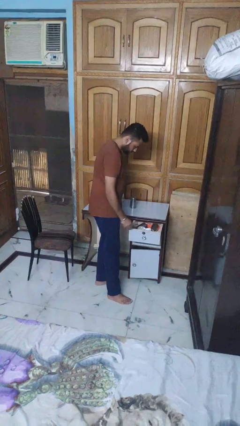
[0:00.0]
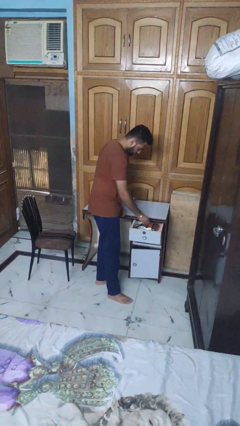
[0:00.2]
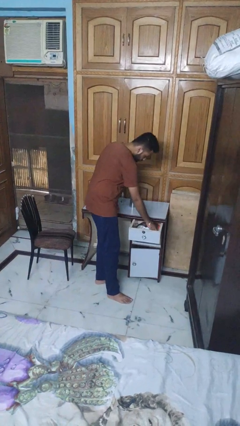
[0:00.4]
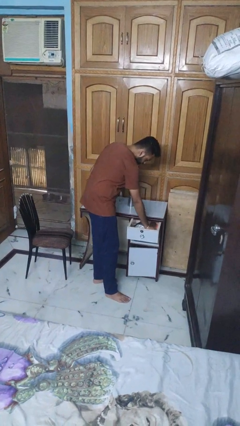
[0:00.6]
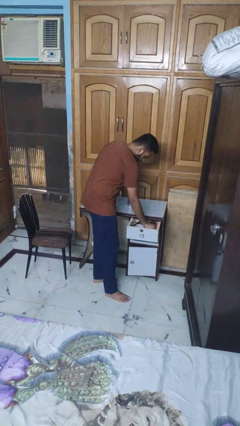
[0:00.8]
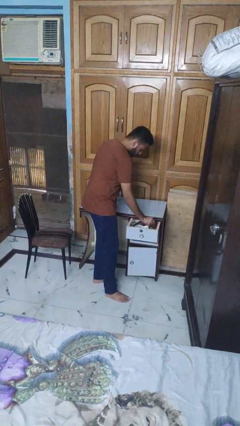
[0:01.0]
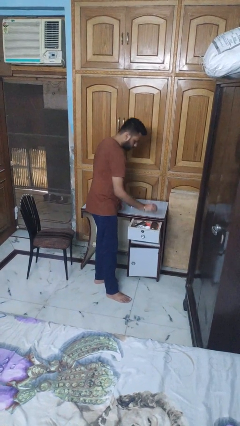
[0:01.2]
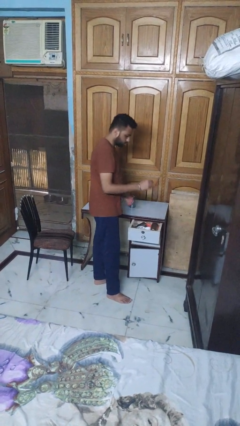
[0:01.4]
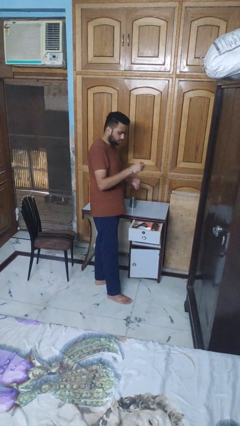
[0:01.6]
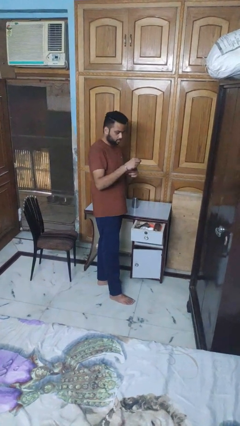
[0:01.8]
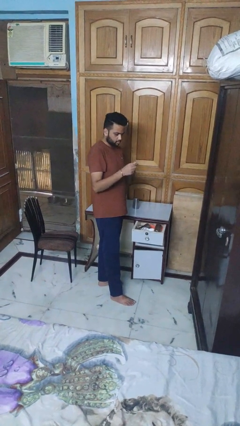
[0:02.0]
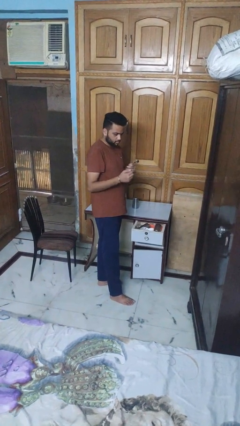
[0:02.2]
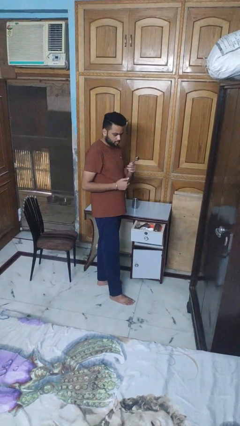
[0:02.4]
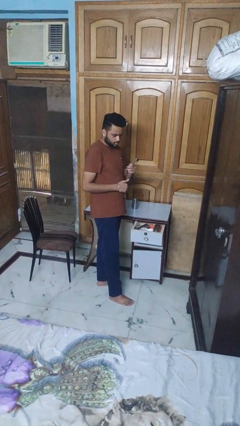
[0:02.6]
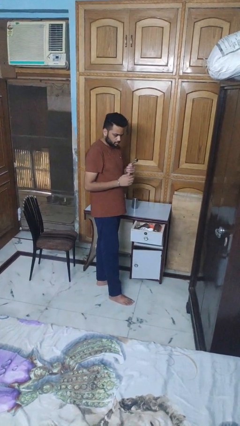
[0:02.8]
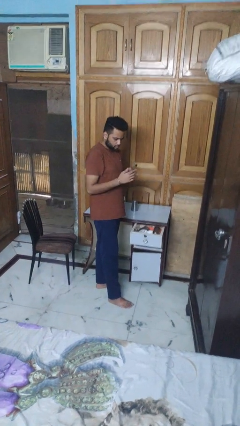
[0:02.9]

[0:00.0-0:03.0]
person takes object from kitchen drawer

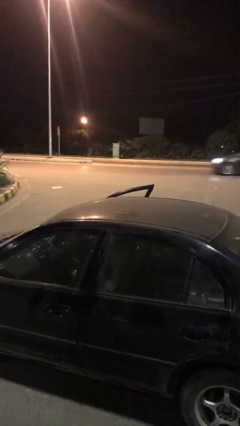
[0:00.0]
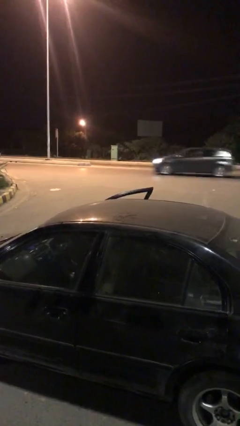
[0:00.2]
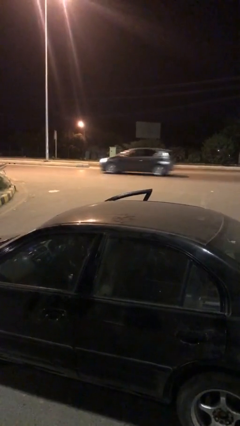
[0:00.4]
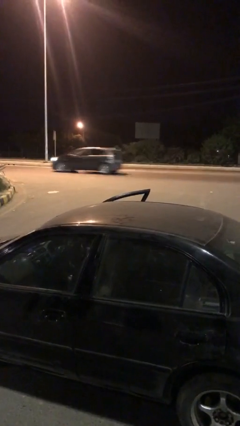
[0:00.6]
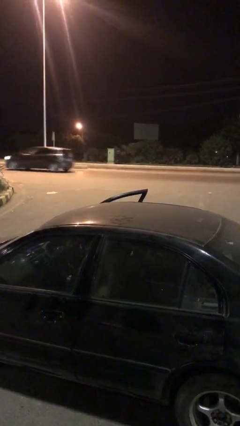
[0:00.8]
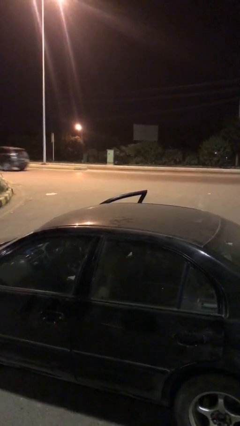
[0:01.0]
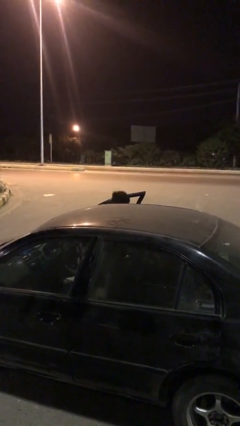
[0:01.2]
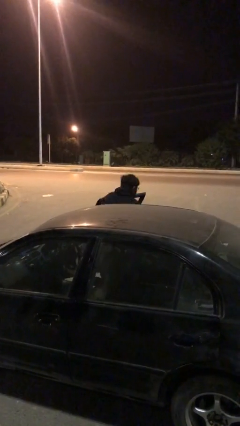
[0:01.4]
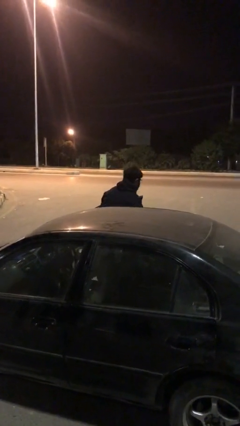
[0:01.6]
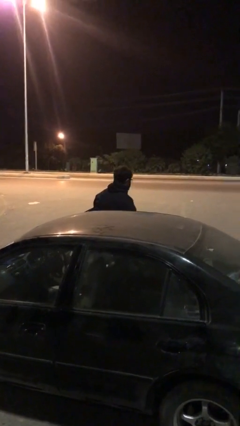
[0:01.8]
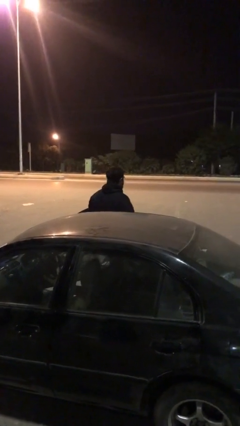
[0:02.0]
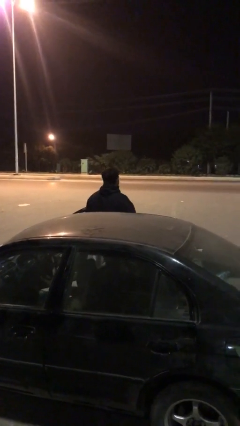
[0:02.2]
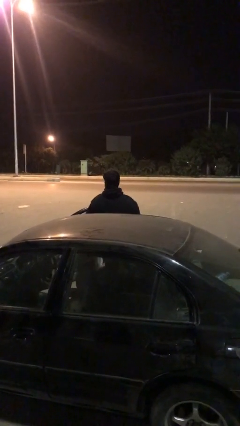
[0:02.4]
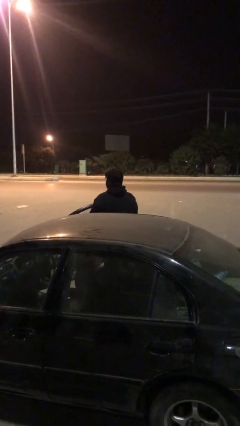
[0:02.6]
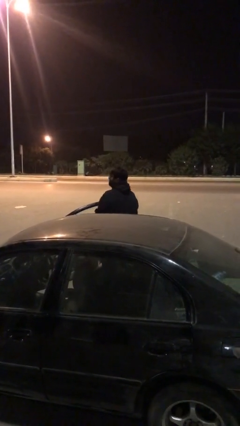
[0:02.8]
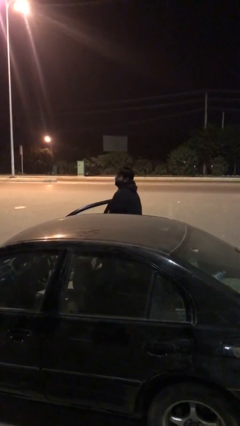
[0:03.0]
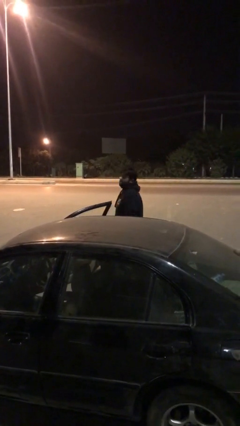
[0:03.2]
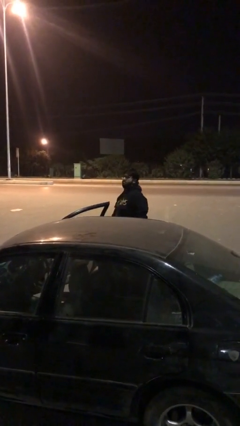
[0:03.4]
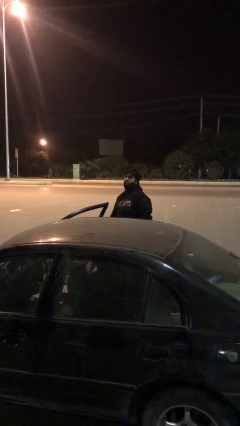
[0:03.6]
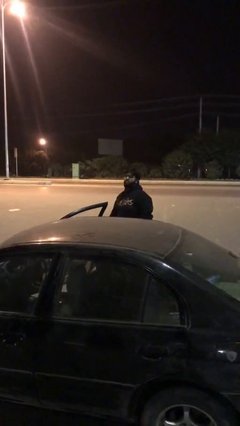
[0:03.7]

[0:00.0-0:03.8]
person exits car

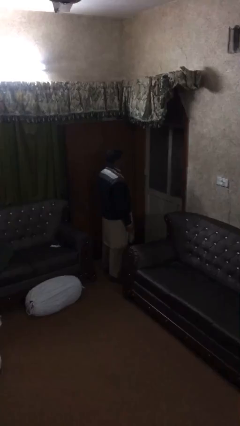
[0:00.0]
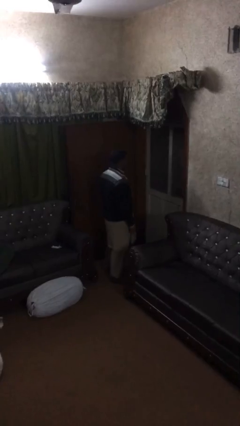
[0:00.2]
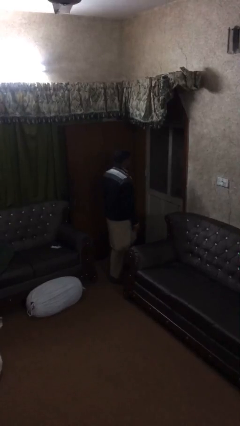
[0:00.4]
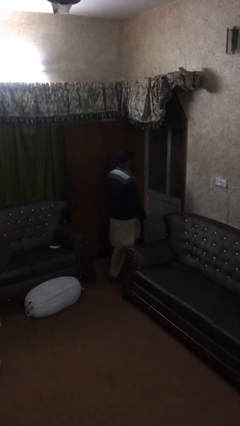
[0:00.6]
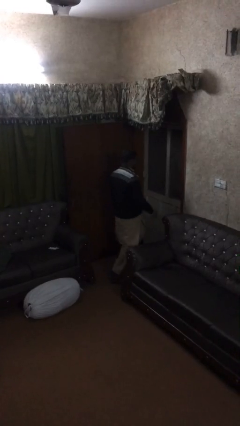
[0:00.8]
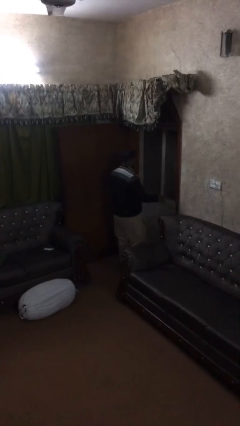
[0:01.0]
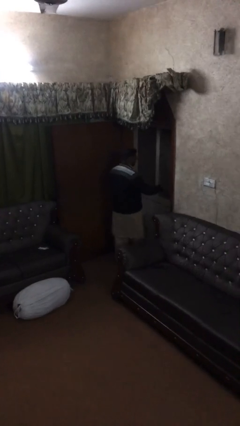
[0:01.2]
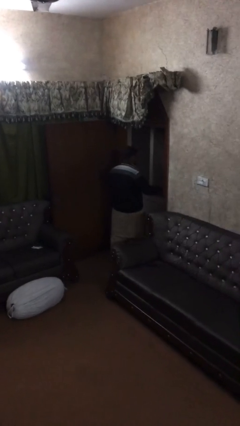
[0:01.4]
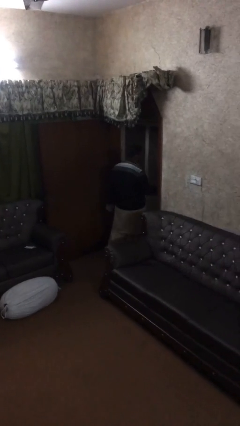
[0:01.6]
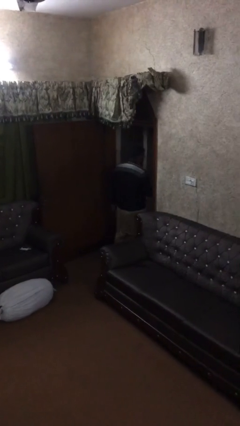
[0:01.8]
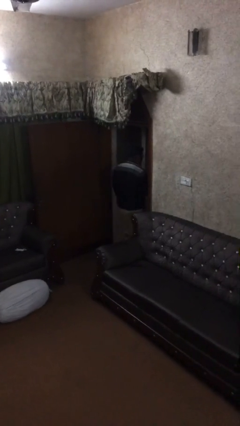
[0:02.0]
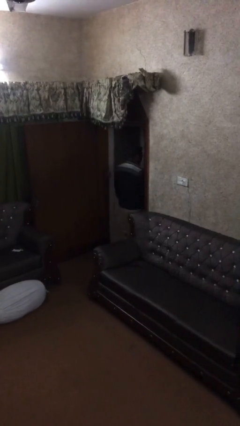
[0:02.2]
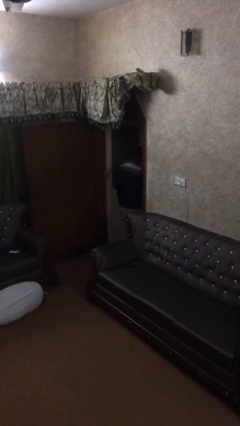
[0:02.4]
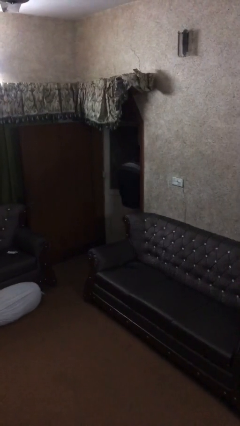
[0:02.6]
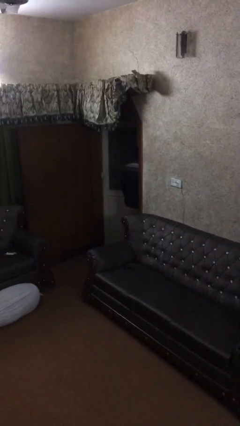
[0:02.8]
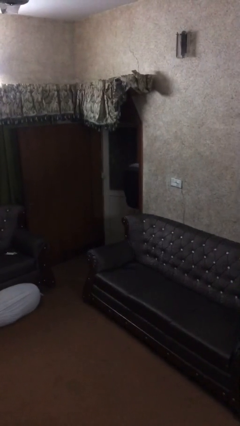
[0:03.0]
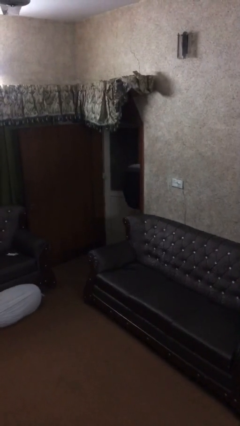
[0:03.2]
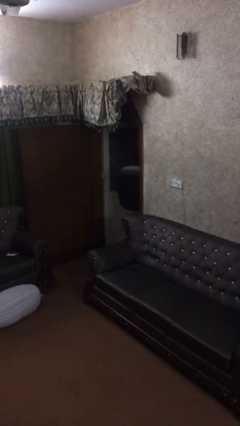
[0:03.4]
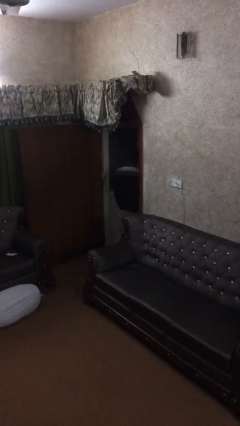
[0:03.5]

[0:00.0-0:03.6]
person opens facility door

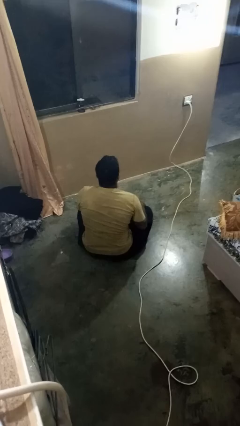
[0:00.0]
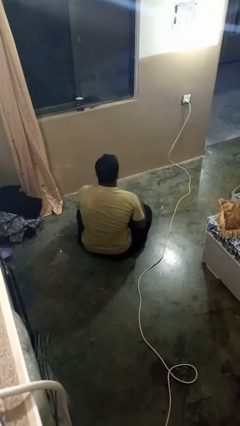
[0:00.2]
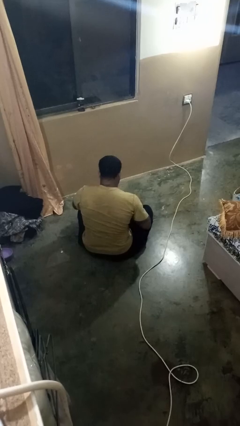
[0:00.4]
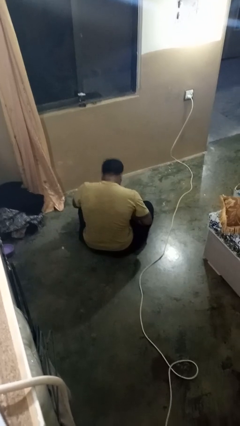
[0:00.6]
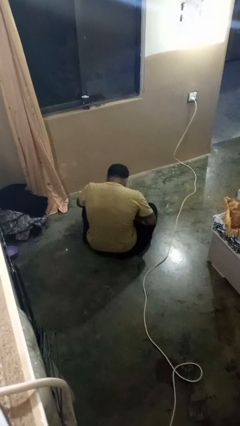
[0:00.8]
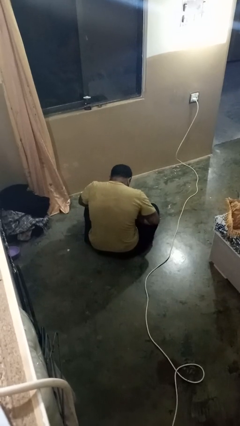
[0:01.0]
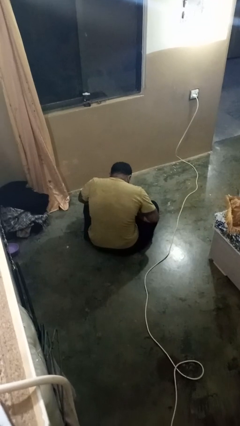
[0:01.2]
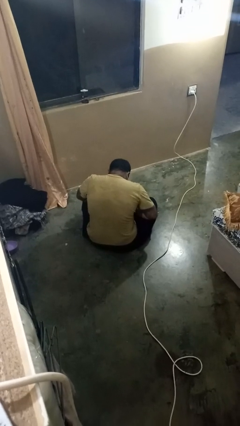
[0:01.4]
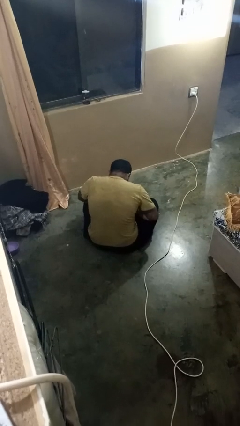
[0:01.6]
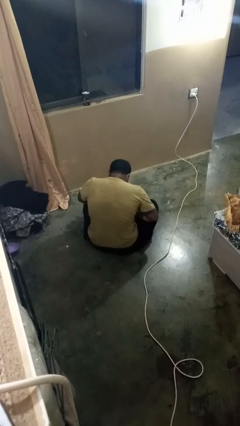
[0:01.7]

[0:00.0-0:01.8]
person looks at hands in lap

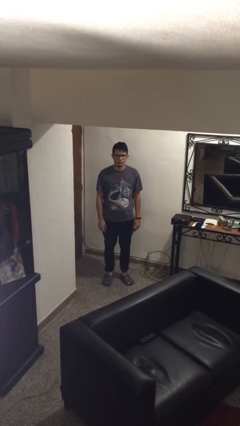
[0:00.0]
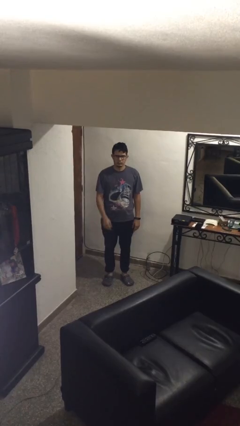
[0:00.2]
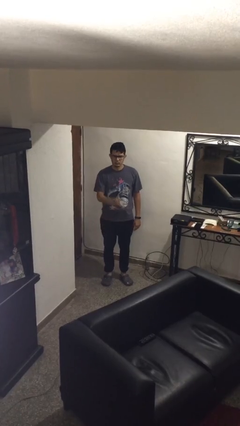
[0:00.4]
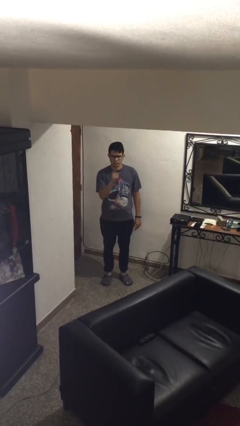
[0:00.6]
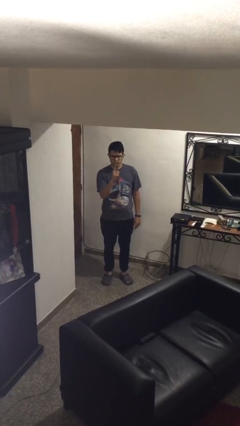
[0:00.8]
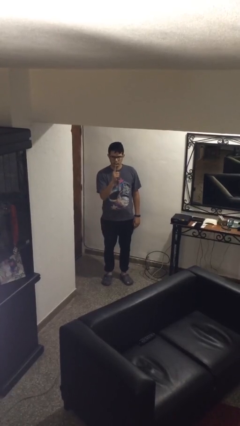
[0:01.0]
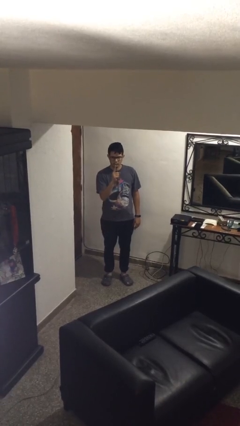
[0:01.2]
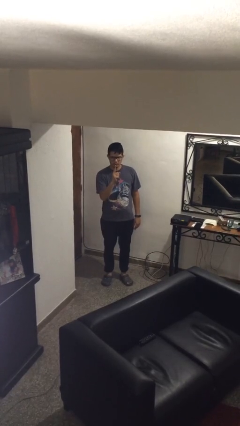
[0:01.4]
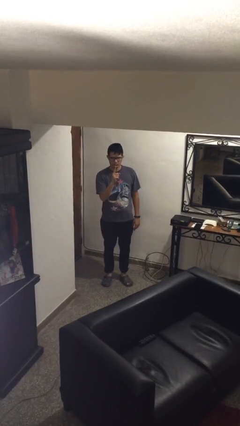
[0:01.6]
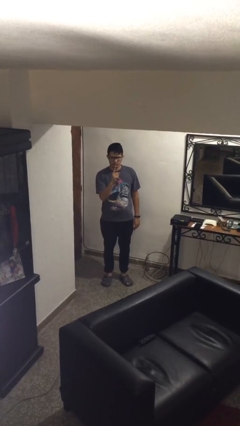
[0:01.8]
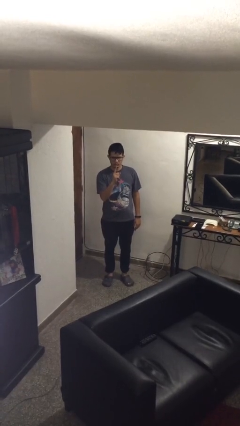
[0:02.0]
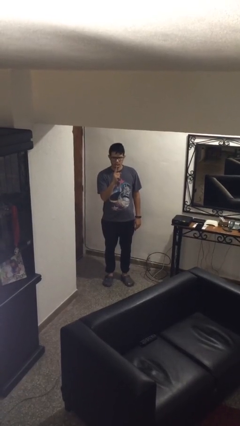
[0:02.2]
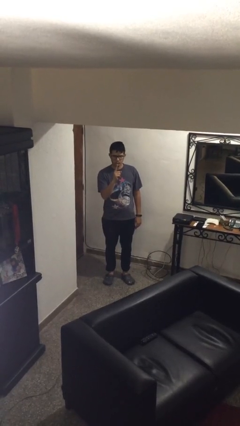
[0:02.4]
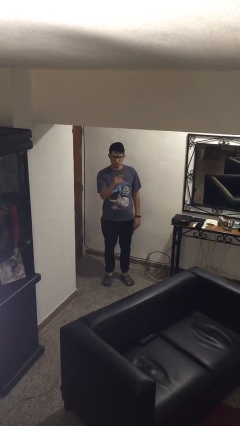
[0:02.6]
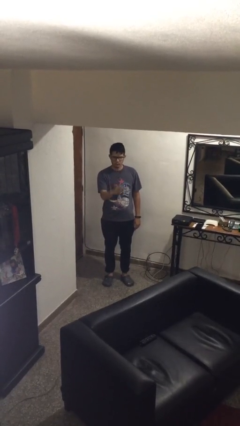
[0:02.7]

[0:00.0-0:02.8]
person gestures number one

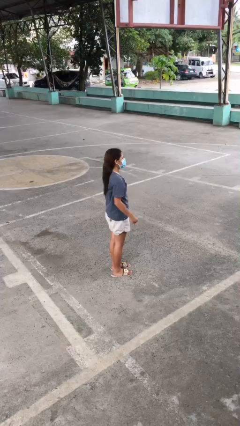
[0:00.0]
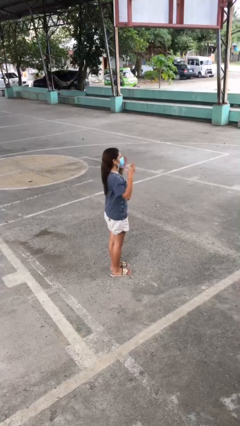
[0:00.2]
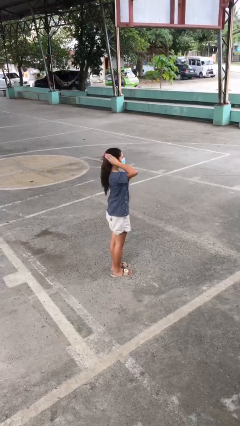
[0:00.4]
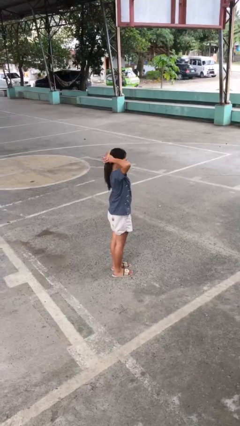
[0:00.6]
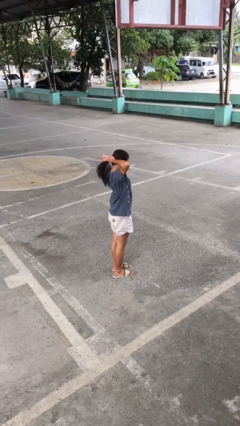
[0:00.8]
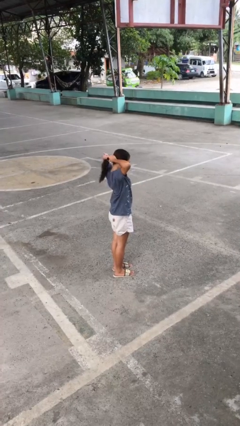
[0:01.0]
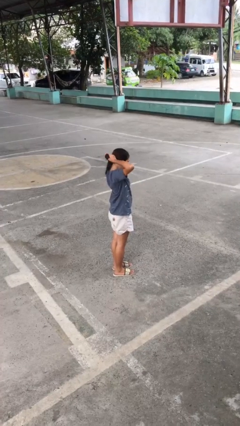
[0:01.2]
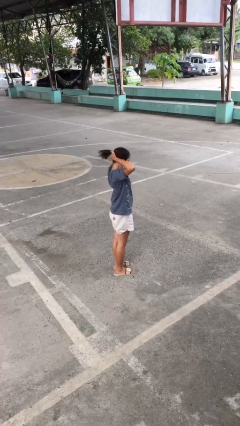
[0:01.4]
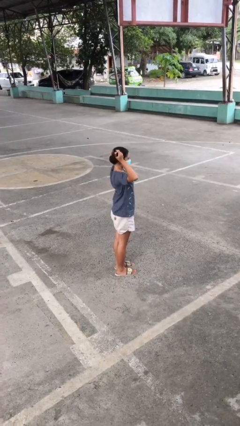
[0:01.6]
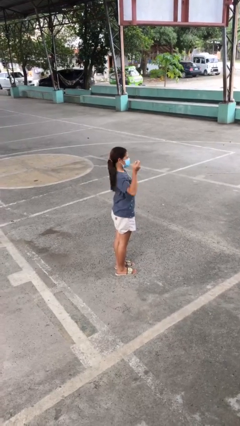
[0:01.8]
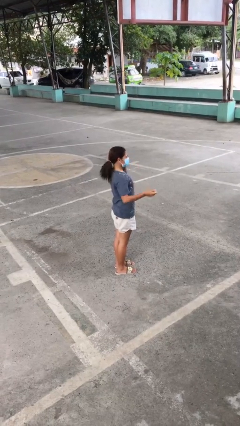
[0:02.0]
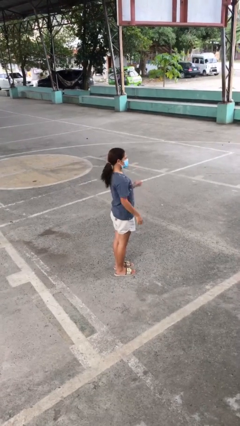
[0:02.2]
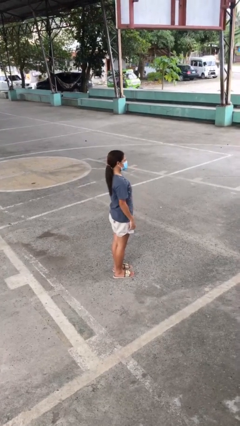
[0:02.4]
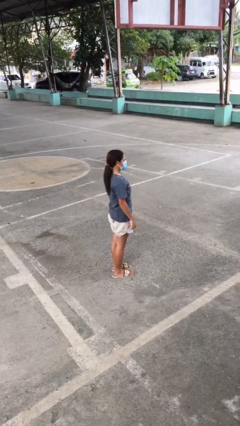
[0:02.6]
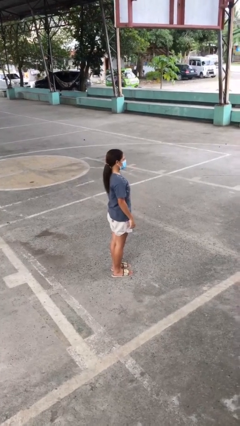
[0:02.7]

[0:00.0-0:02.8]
person puts hair in ponytail
